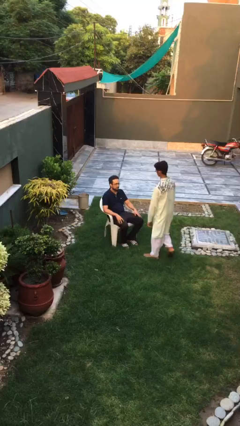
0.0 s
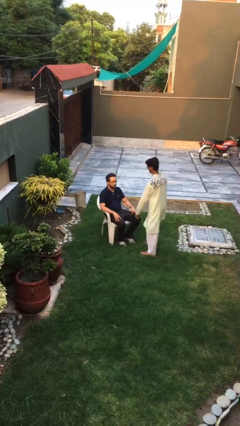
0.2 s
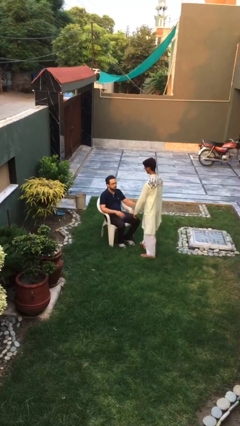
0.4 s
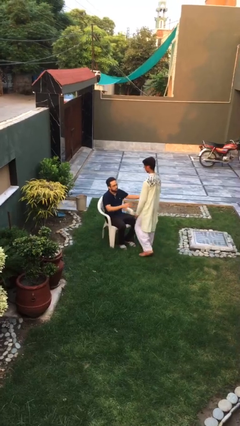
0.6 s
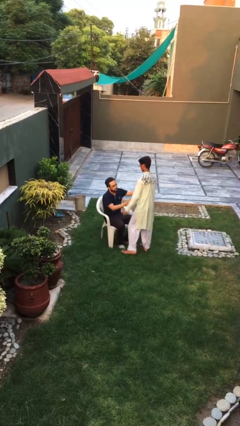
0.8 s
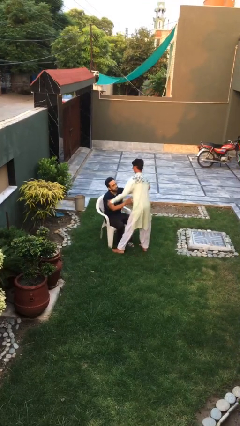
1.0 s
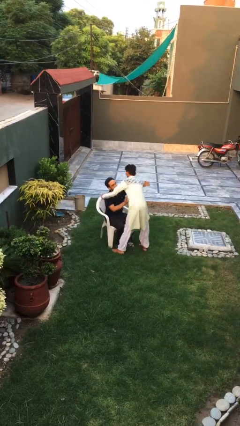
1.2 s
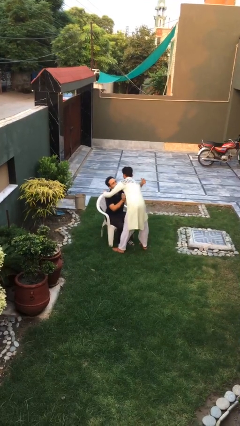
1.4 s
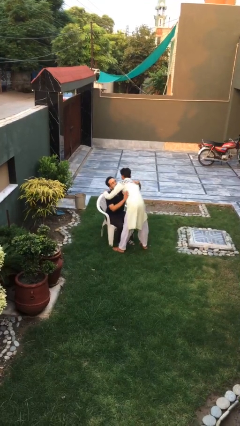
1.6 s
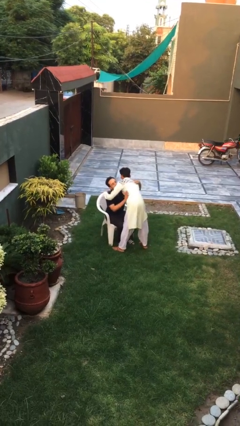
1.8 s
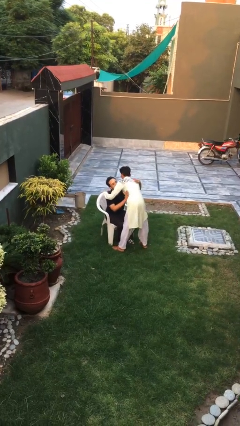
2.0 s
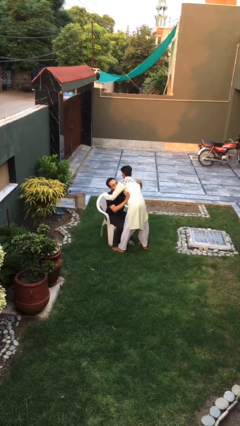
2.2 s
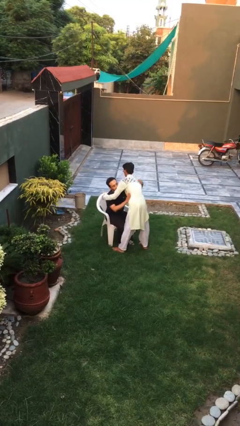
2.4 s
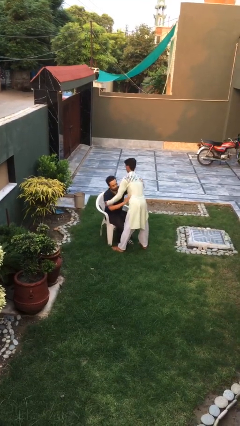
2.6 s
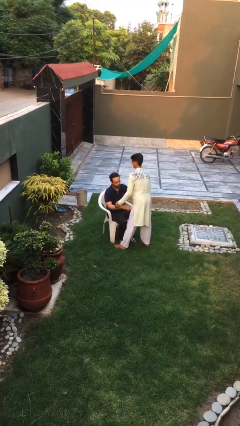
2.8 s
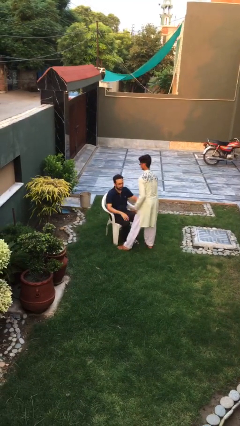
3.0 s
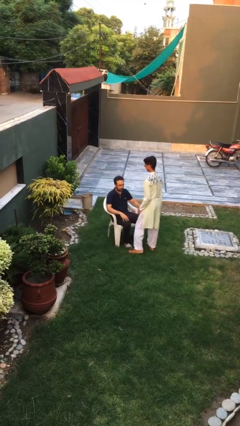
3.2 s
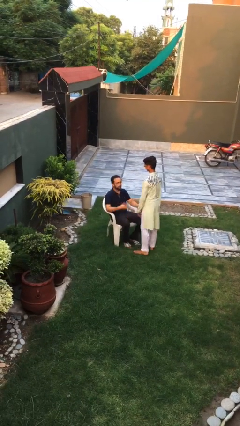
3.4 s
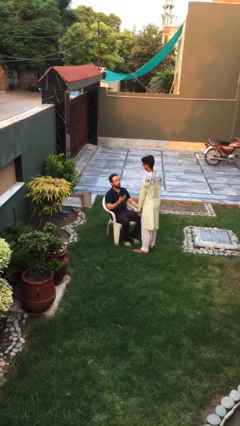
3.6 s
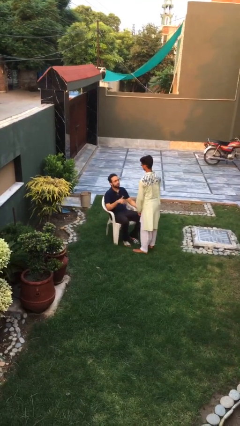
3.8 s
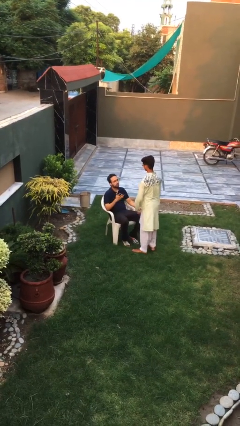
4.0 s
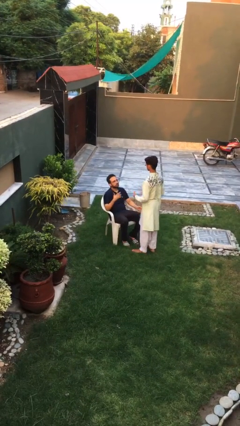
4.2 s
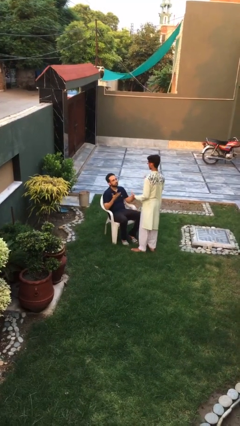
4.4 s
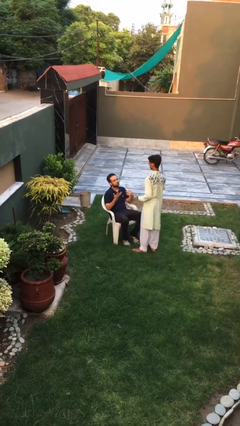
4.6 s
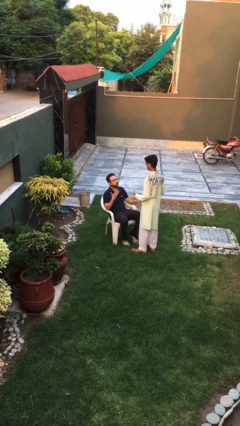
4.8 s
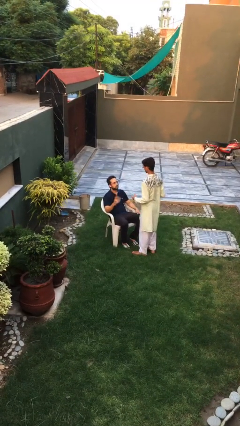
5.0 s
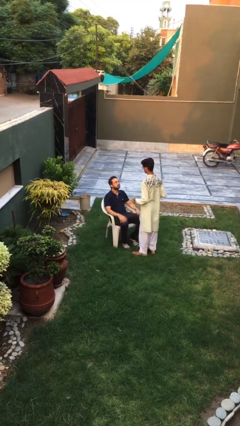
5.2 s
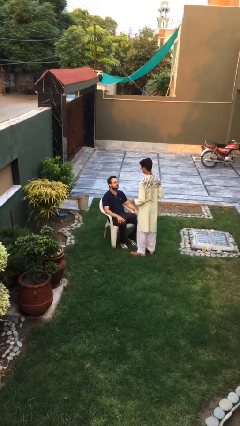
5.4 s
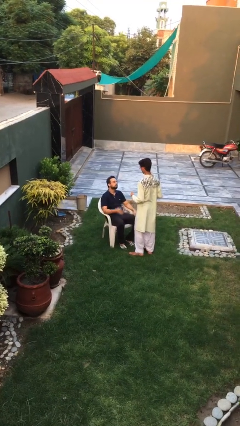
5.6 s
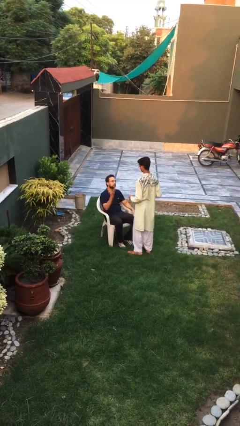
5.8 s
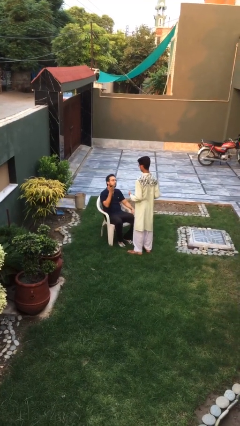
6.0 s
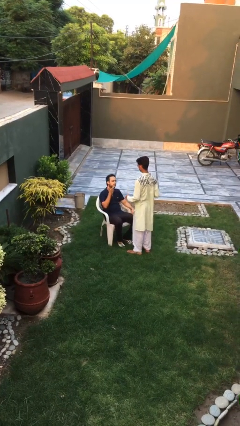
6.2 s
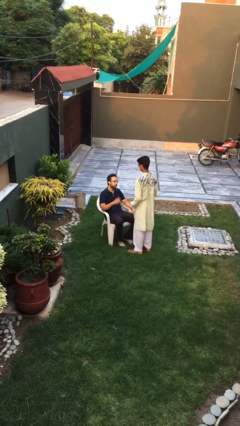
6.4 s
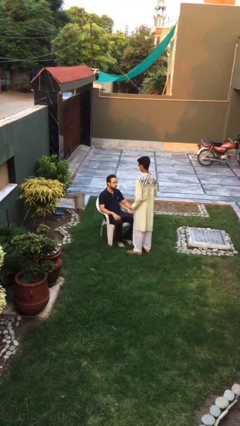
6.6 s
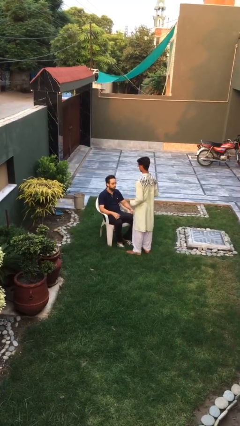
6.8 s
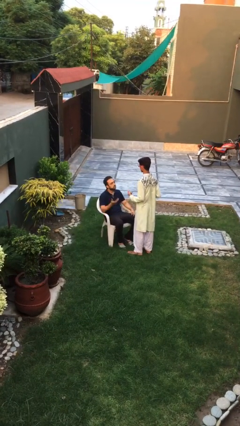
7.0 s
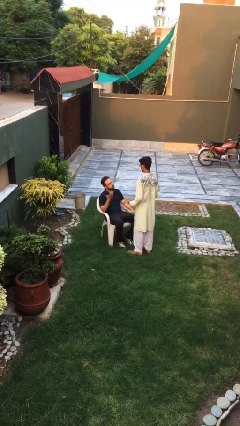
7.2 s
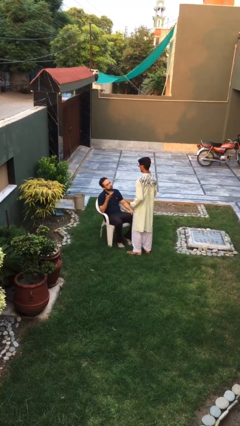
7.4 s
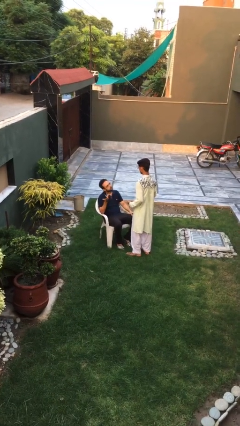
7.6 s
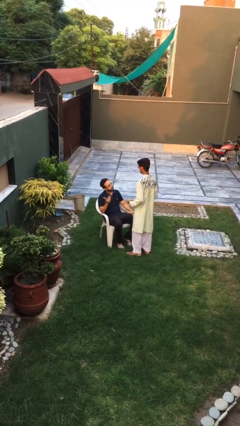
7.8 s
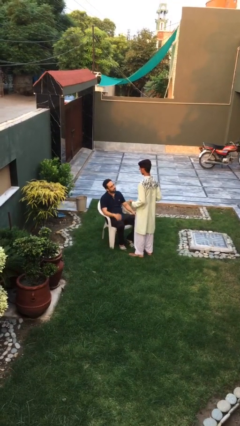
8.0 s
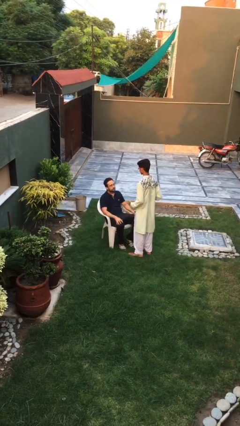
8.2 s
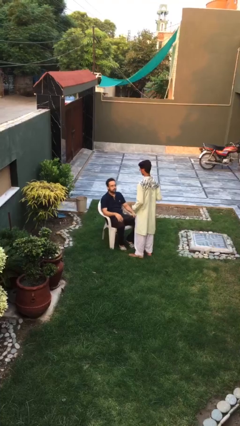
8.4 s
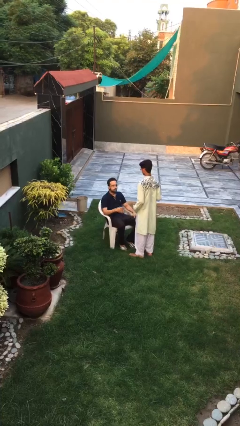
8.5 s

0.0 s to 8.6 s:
person embraces person

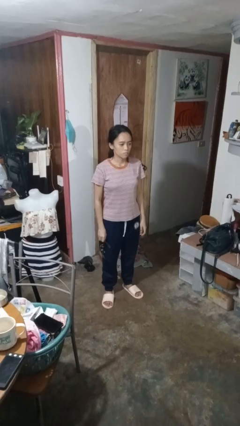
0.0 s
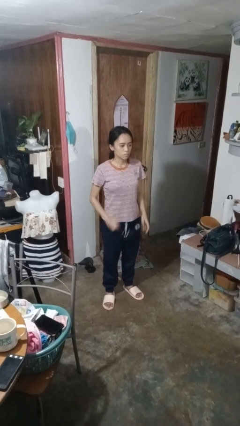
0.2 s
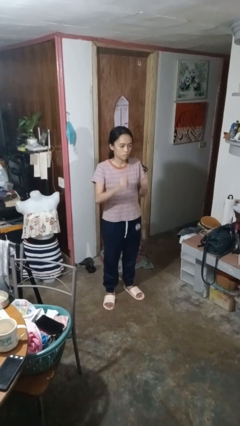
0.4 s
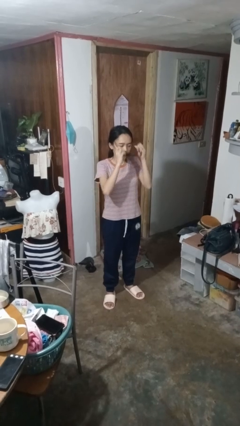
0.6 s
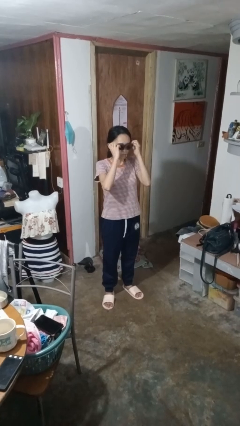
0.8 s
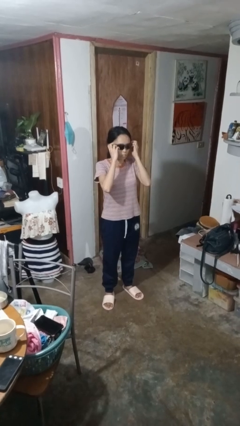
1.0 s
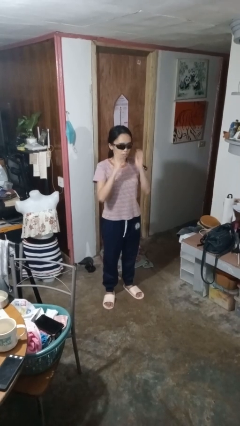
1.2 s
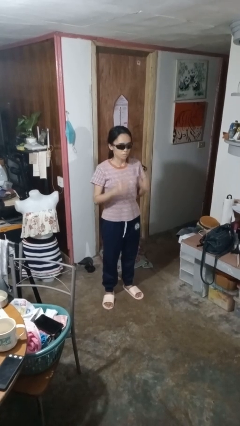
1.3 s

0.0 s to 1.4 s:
person puts on sunglasses

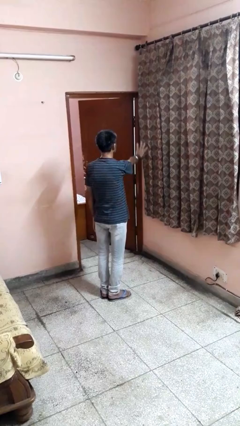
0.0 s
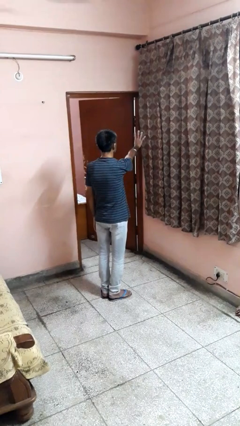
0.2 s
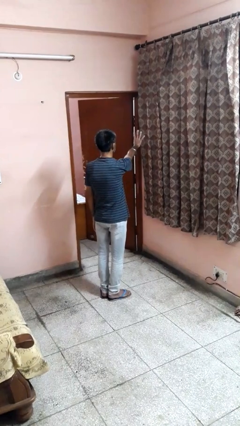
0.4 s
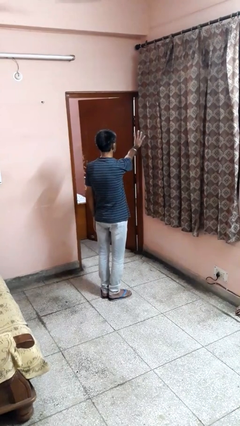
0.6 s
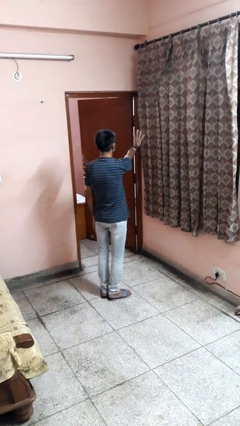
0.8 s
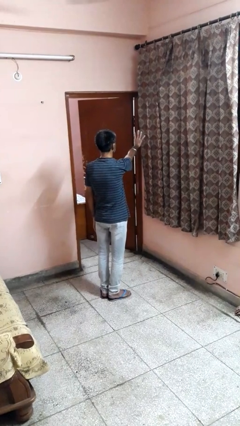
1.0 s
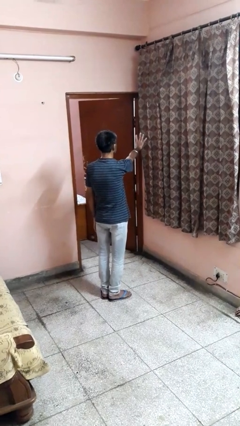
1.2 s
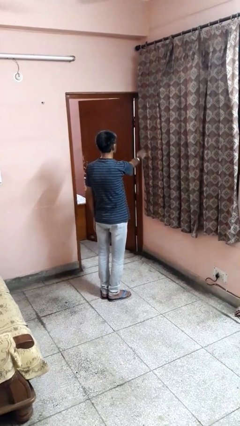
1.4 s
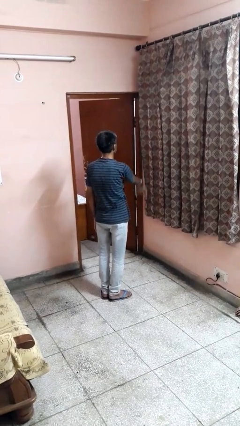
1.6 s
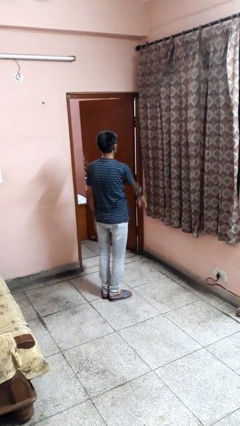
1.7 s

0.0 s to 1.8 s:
person gestures number four

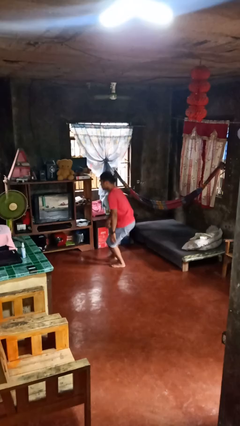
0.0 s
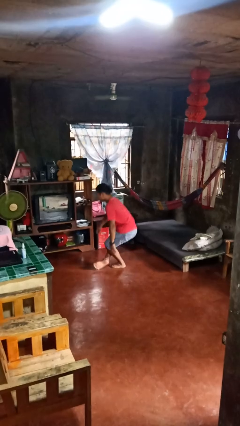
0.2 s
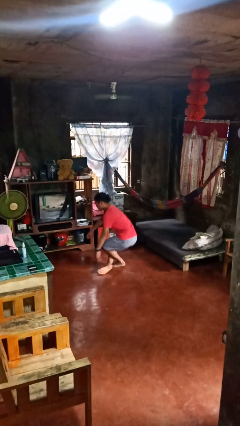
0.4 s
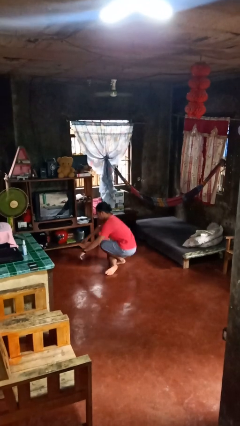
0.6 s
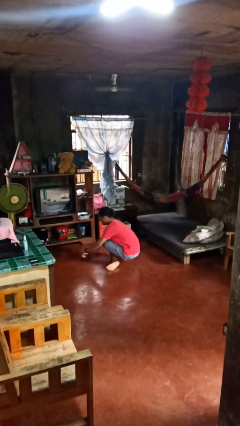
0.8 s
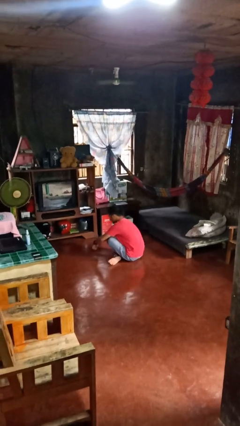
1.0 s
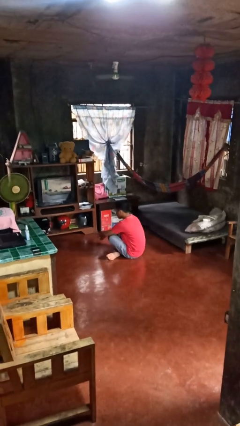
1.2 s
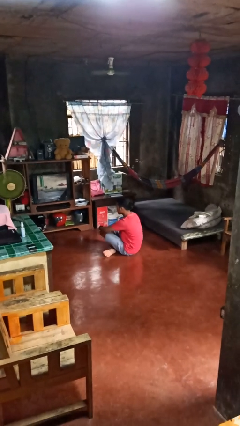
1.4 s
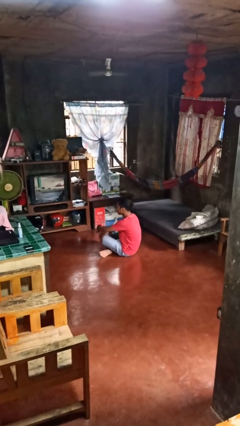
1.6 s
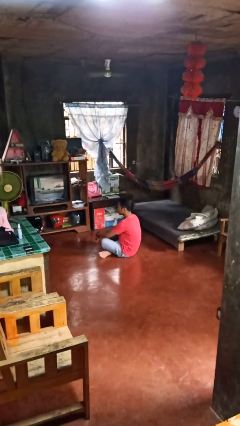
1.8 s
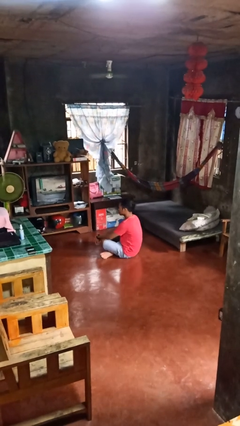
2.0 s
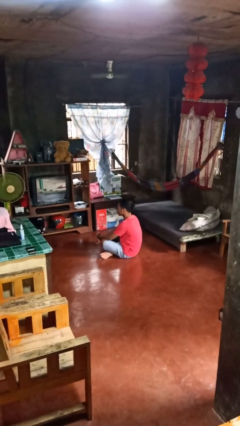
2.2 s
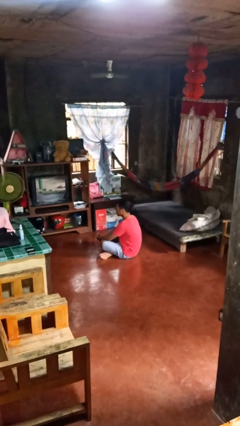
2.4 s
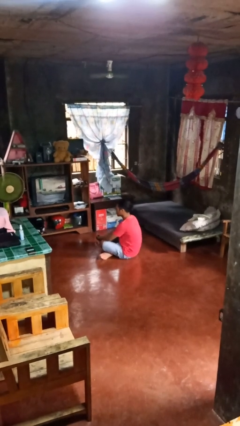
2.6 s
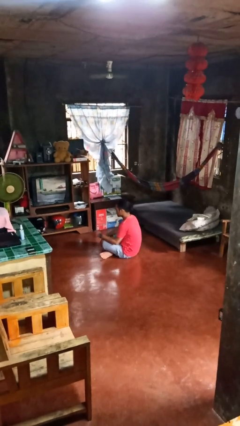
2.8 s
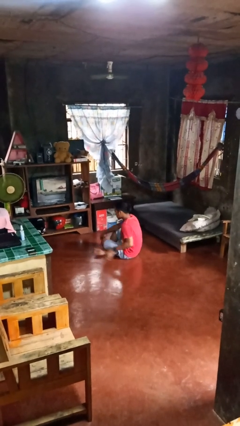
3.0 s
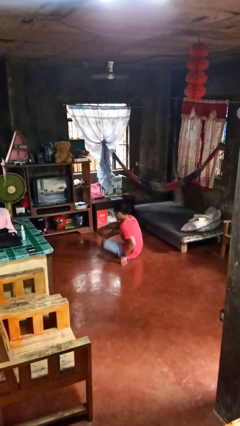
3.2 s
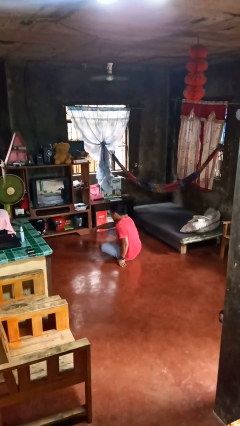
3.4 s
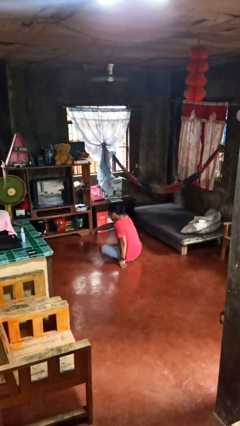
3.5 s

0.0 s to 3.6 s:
person sits crisscross

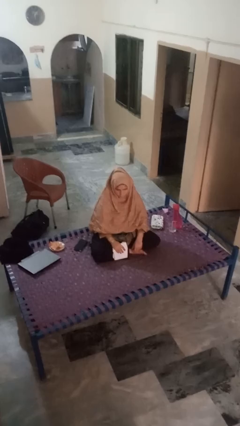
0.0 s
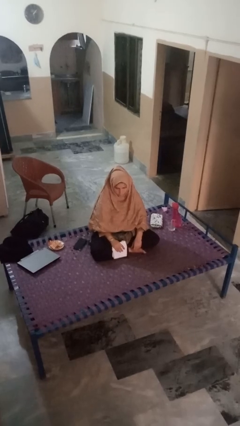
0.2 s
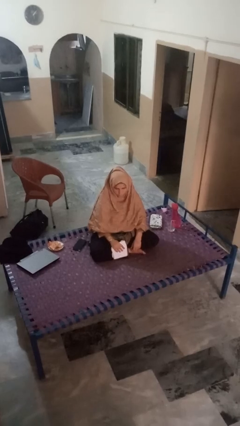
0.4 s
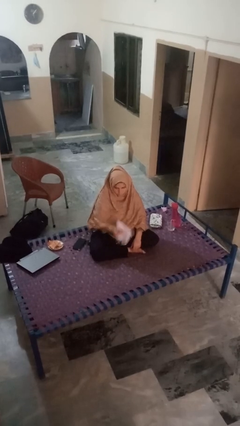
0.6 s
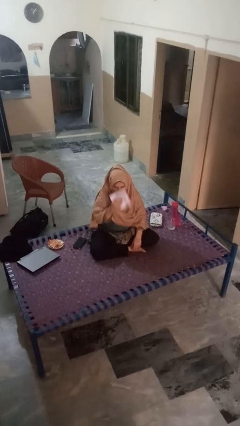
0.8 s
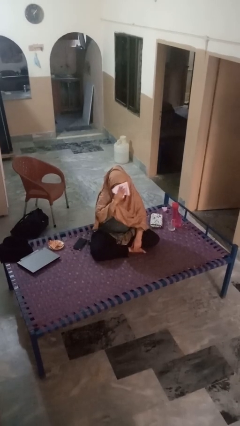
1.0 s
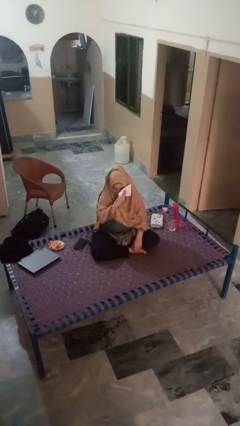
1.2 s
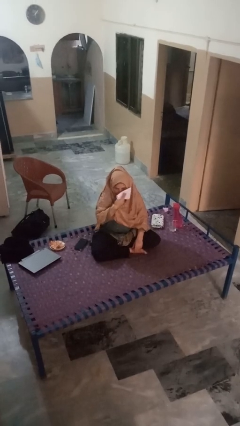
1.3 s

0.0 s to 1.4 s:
person wipes mouth with napkin

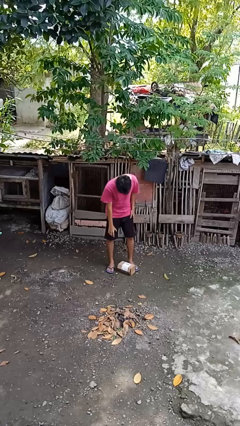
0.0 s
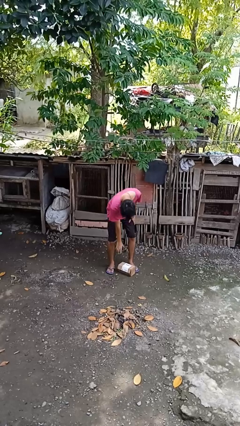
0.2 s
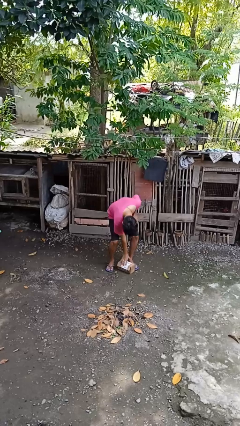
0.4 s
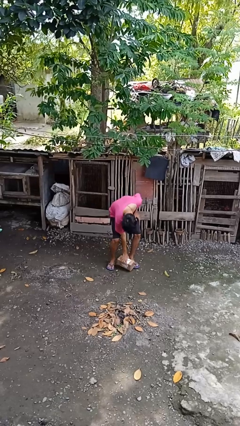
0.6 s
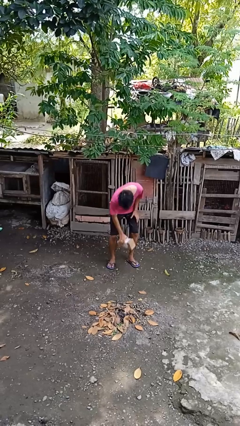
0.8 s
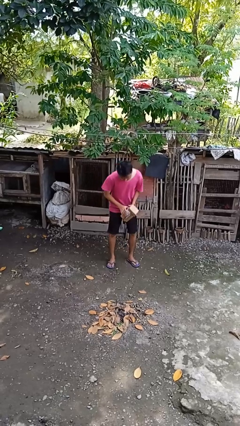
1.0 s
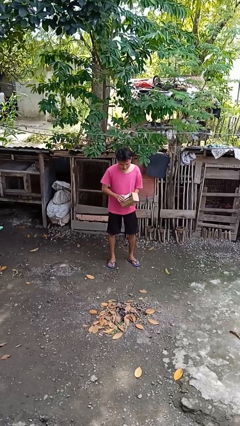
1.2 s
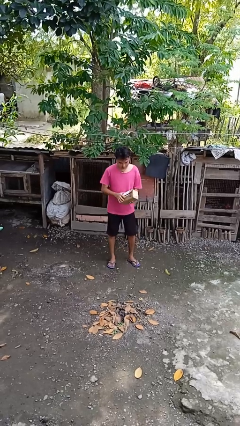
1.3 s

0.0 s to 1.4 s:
person picks up object from floor
